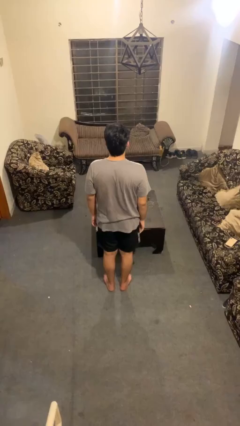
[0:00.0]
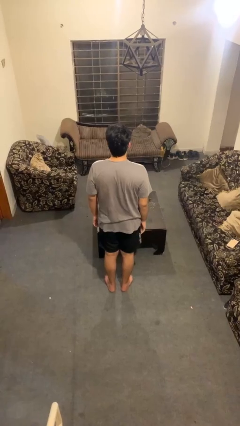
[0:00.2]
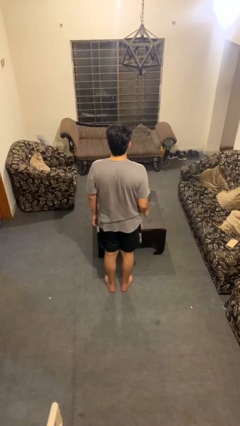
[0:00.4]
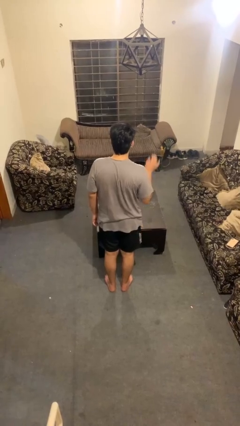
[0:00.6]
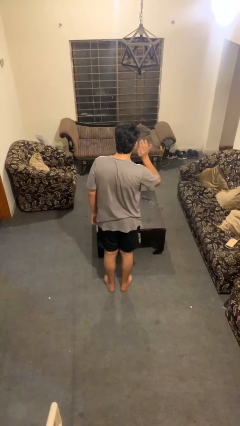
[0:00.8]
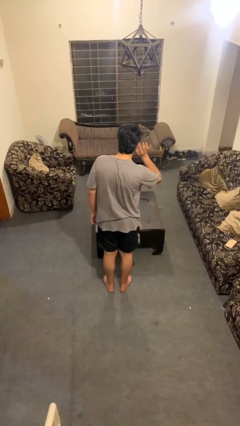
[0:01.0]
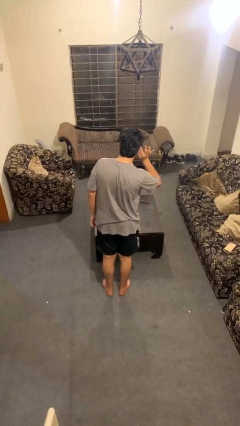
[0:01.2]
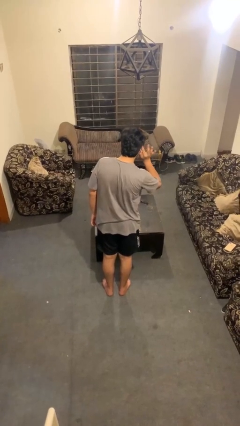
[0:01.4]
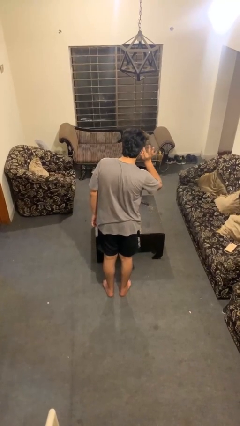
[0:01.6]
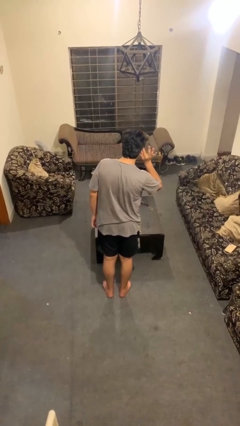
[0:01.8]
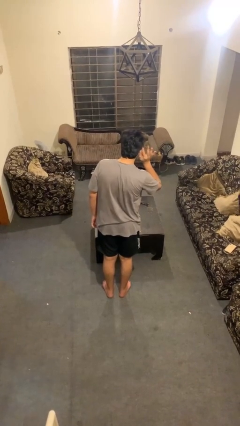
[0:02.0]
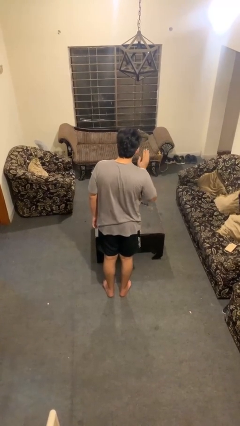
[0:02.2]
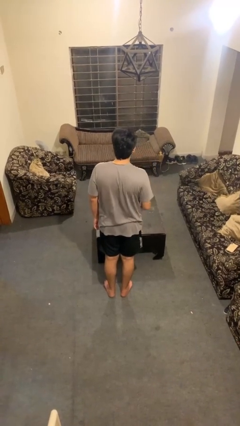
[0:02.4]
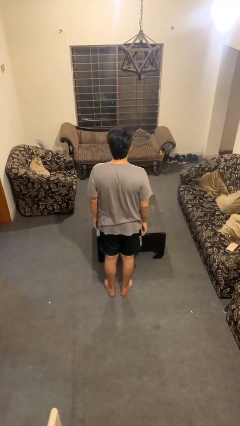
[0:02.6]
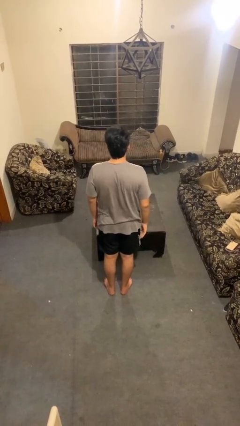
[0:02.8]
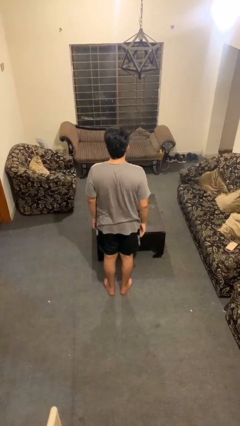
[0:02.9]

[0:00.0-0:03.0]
person gestures listen closely

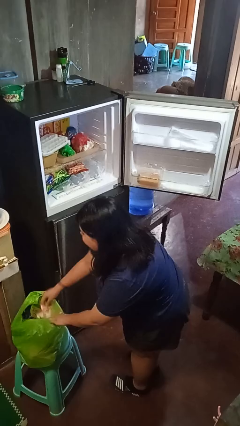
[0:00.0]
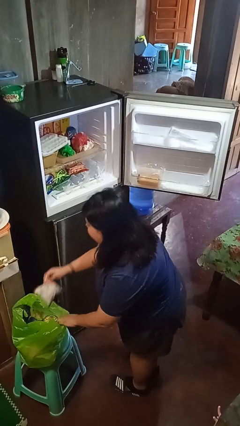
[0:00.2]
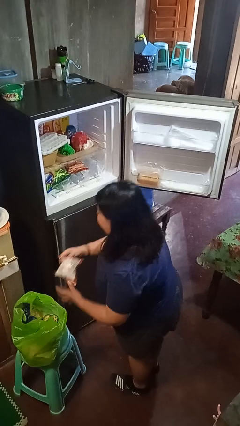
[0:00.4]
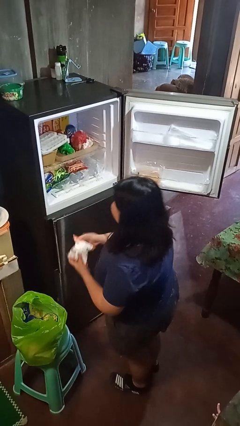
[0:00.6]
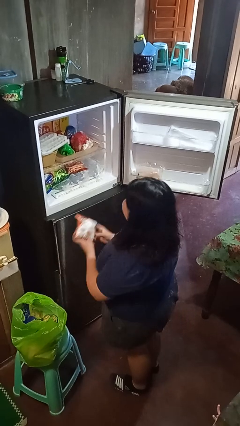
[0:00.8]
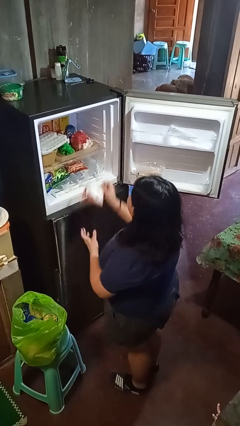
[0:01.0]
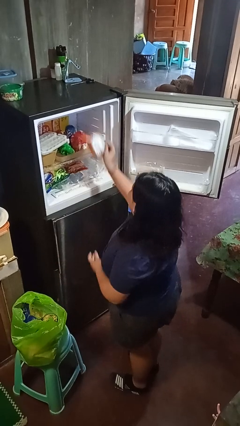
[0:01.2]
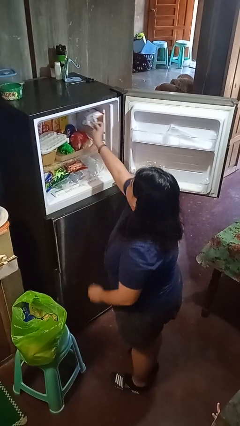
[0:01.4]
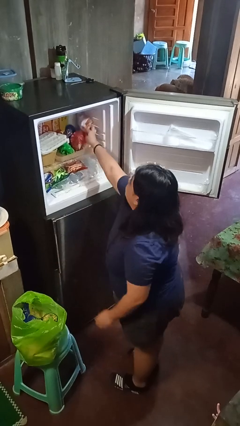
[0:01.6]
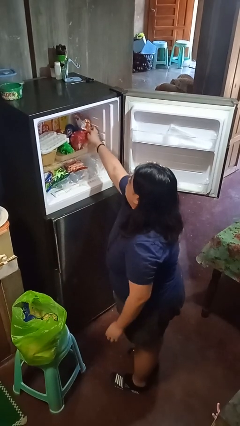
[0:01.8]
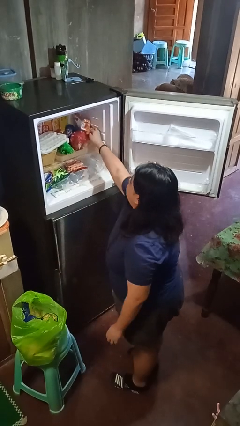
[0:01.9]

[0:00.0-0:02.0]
person loads groceries into refrigerator

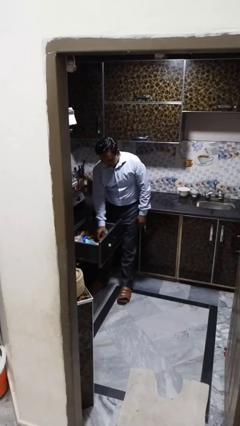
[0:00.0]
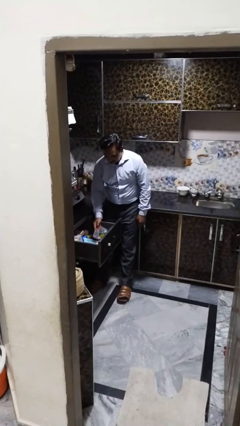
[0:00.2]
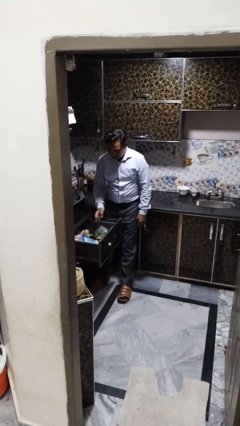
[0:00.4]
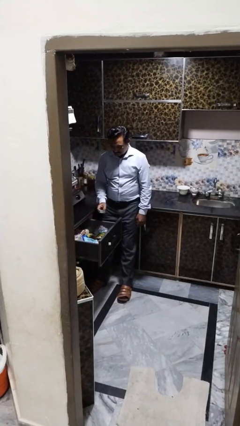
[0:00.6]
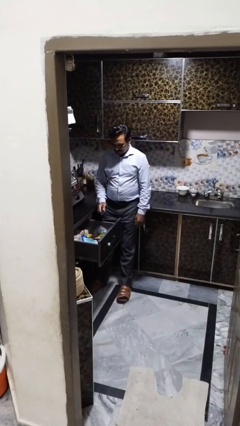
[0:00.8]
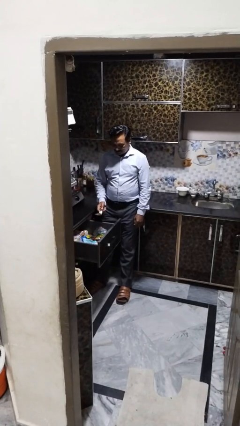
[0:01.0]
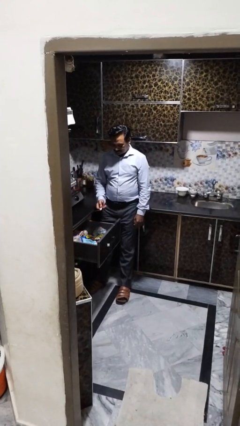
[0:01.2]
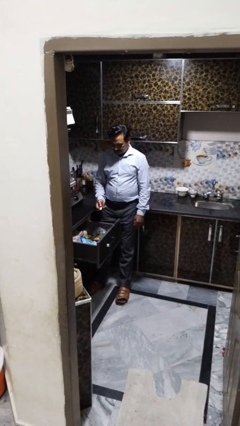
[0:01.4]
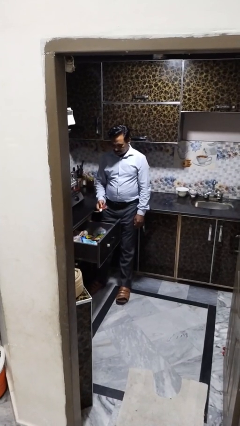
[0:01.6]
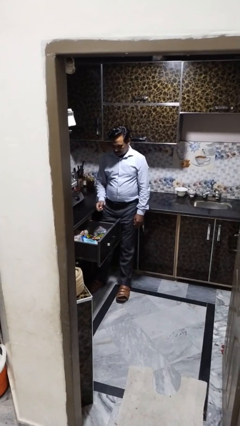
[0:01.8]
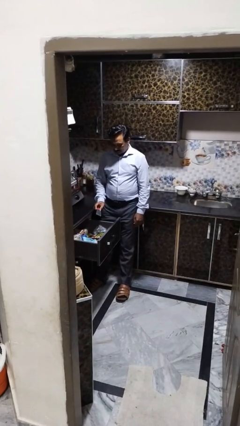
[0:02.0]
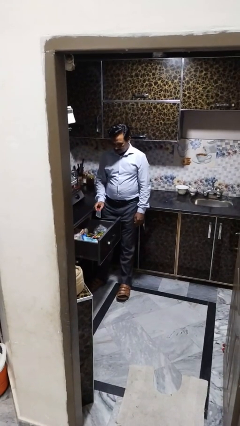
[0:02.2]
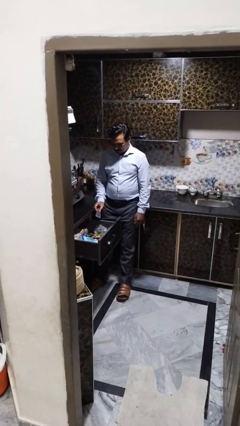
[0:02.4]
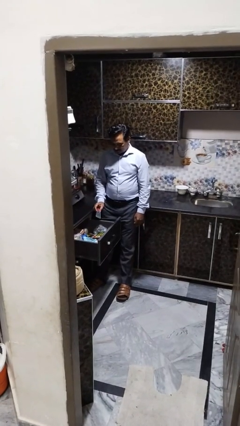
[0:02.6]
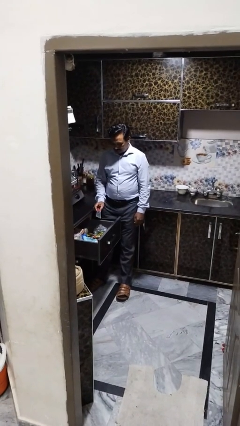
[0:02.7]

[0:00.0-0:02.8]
person takes object from kitchen drawer

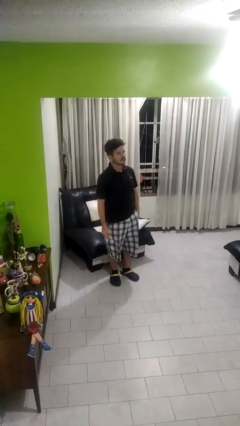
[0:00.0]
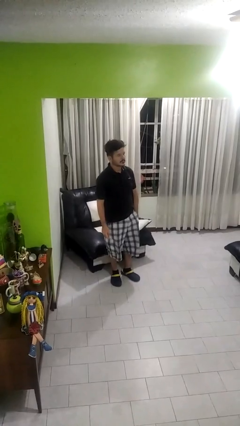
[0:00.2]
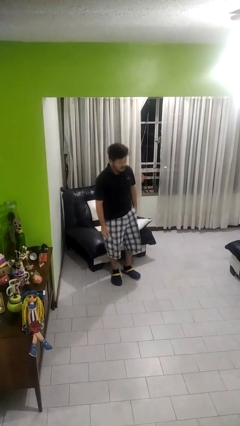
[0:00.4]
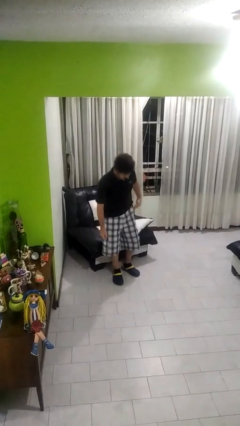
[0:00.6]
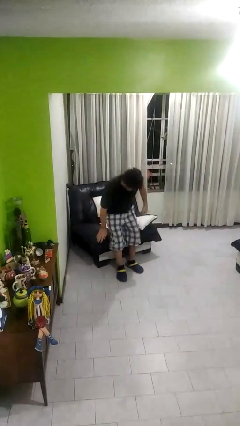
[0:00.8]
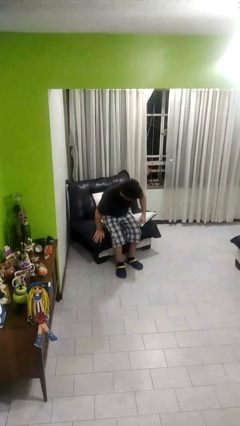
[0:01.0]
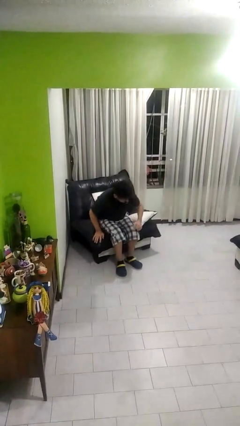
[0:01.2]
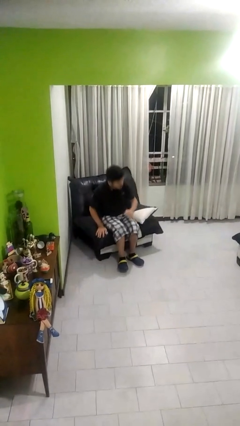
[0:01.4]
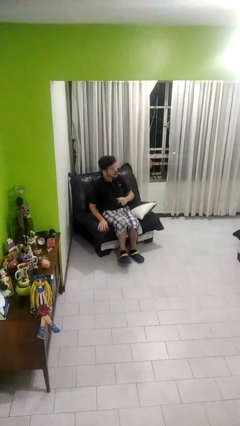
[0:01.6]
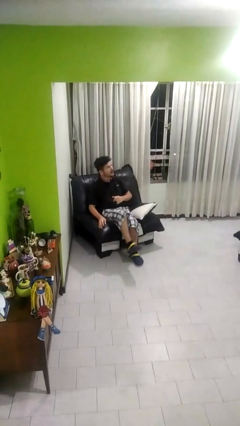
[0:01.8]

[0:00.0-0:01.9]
person lies down on couch

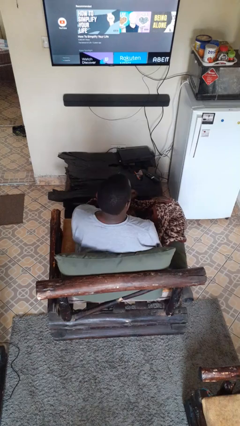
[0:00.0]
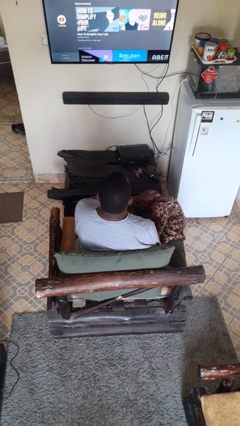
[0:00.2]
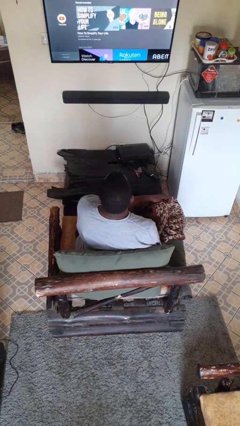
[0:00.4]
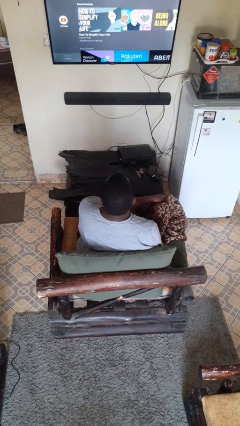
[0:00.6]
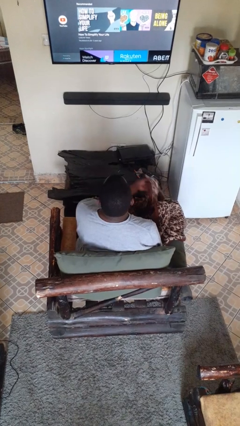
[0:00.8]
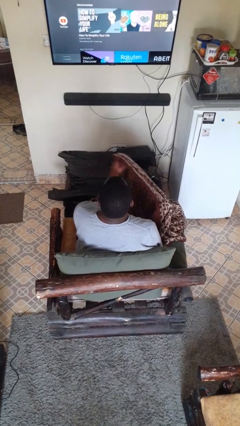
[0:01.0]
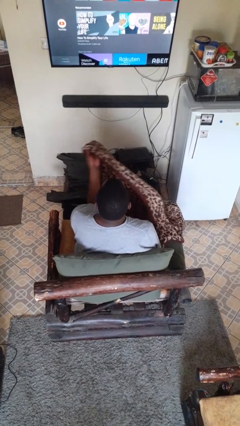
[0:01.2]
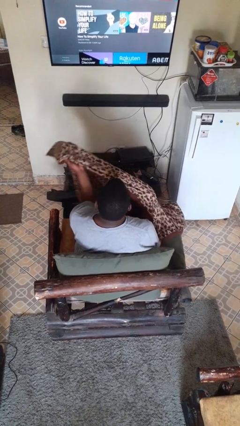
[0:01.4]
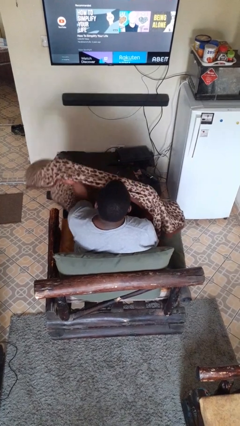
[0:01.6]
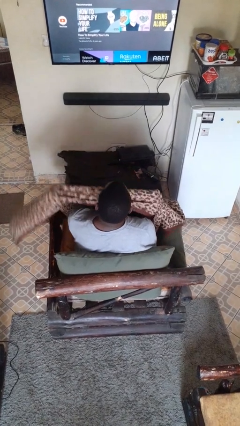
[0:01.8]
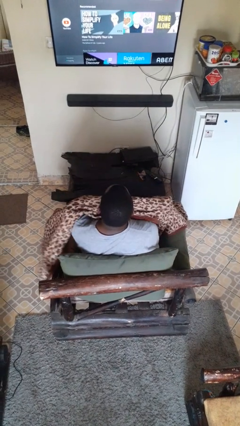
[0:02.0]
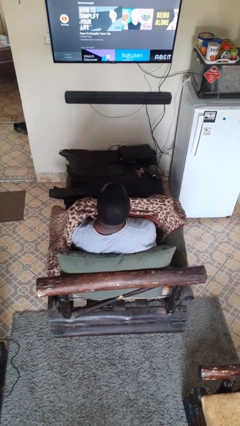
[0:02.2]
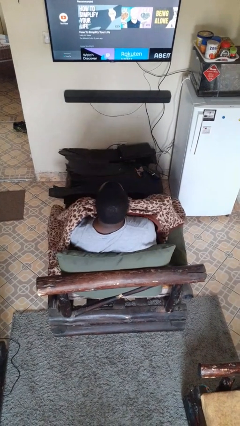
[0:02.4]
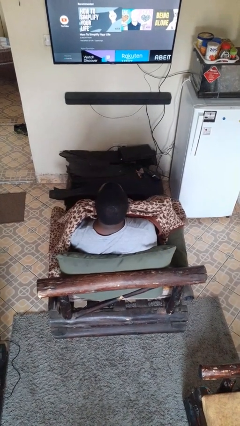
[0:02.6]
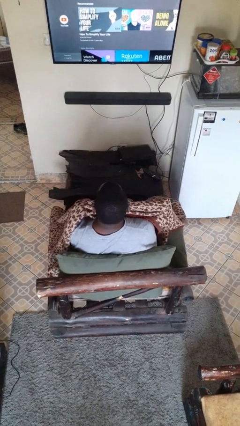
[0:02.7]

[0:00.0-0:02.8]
person covers with blanket

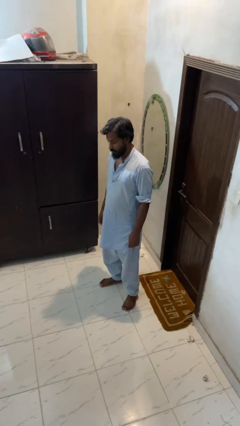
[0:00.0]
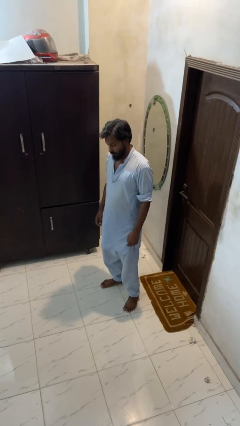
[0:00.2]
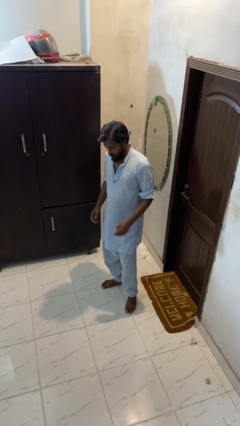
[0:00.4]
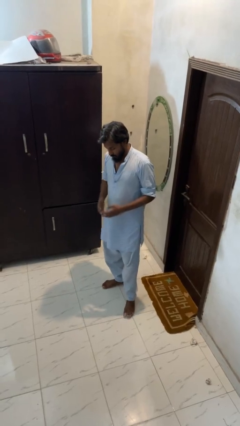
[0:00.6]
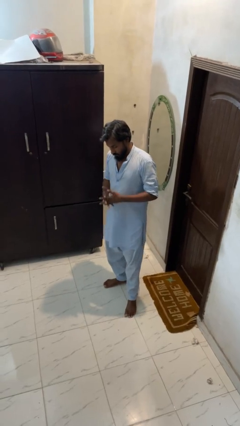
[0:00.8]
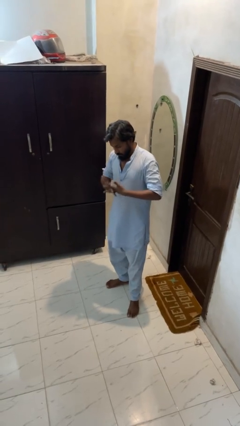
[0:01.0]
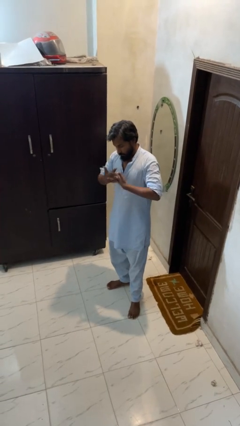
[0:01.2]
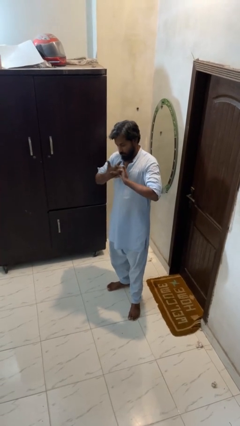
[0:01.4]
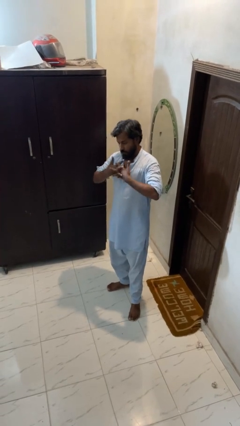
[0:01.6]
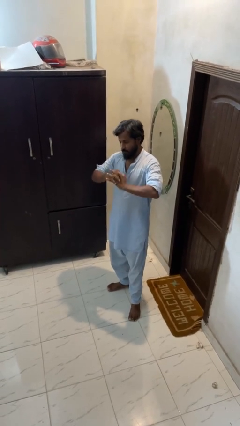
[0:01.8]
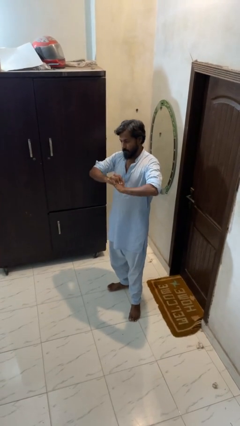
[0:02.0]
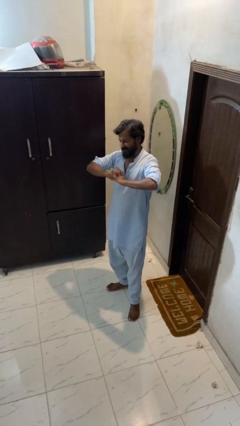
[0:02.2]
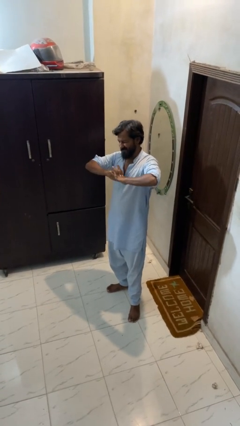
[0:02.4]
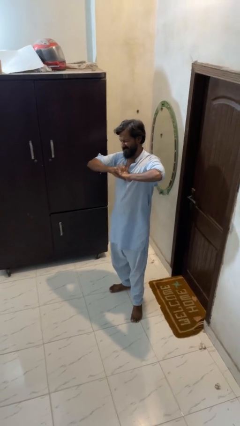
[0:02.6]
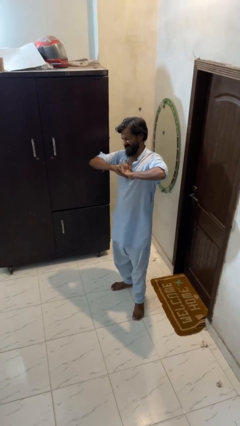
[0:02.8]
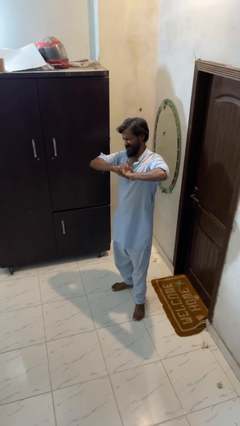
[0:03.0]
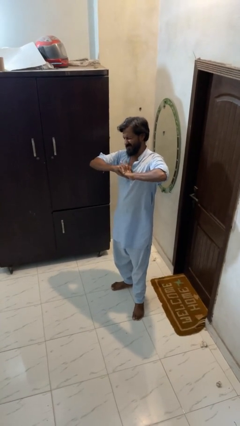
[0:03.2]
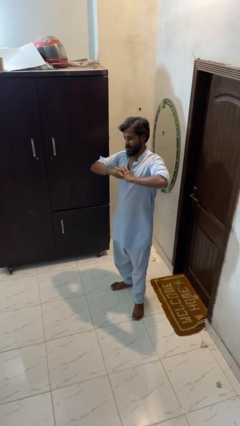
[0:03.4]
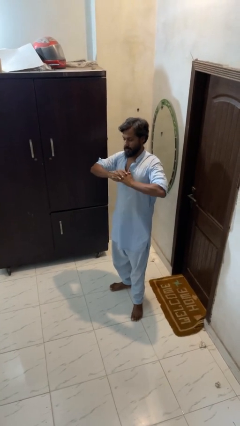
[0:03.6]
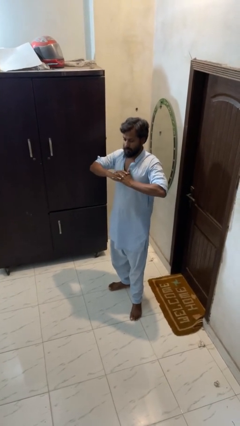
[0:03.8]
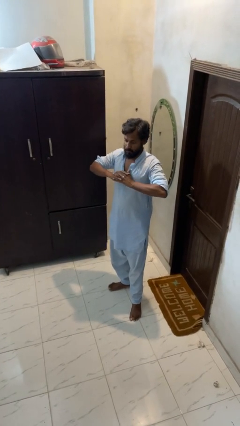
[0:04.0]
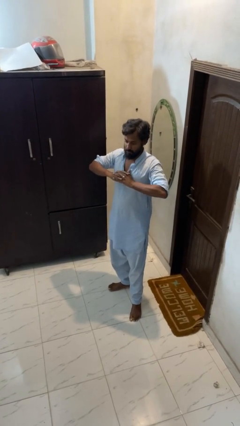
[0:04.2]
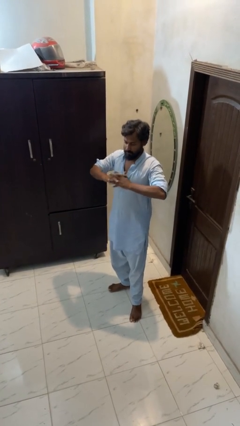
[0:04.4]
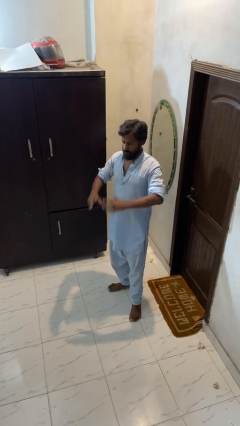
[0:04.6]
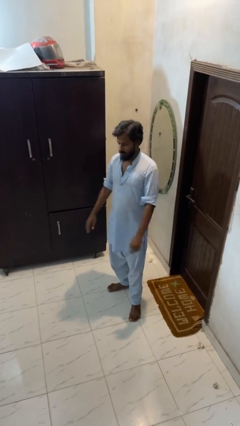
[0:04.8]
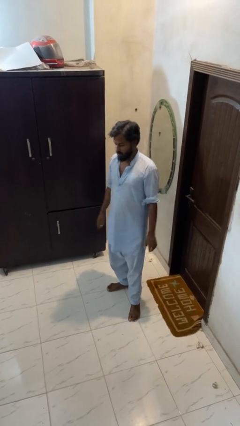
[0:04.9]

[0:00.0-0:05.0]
person cracks knuckles
